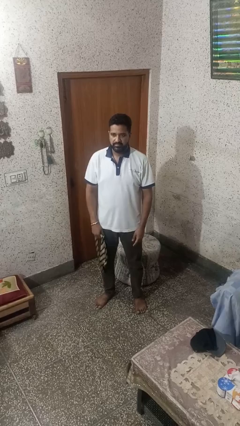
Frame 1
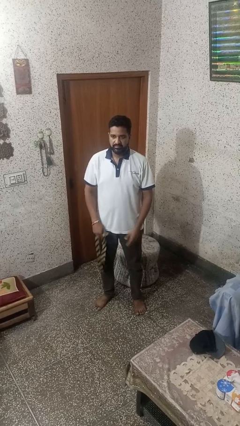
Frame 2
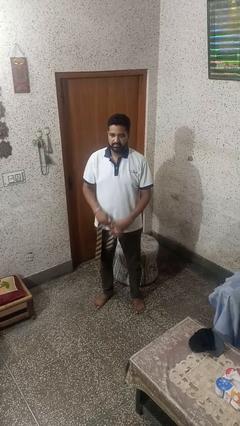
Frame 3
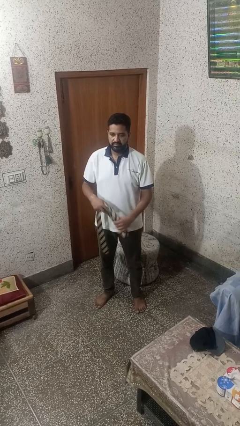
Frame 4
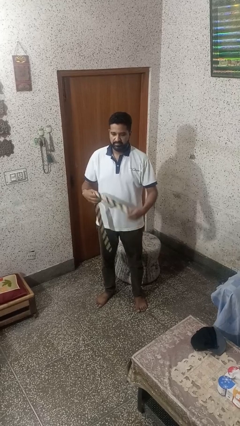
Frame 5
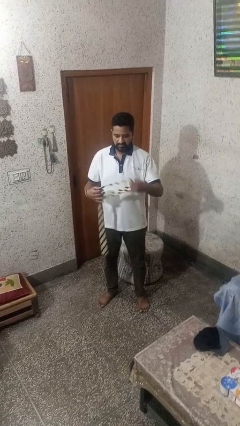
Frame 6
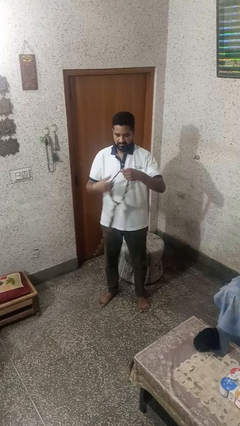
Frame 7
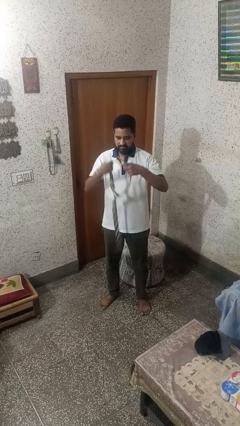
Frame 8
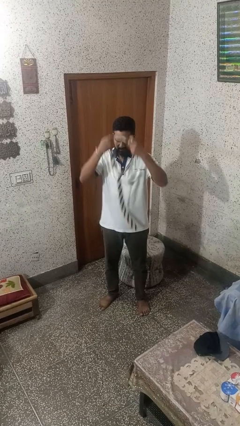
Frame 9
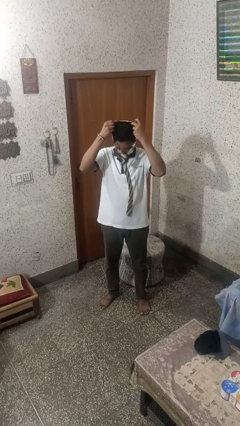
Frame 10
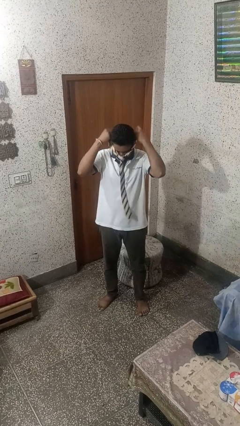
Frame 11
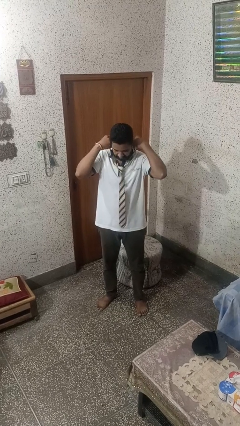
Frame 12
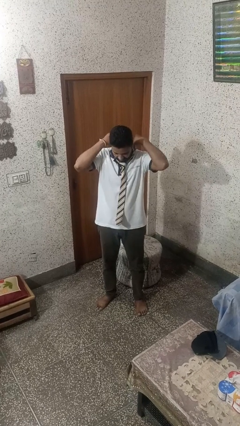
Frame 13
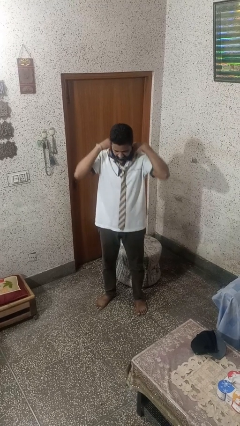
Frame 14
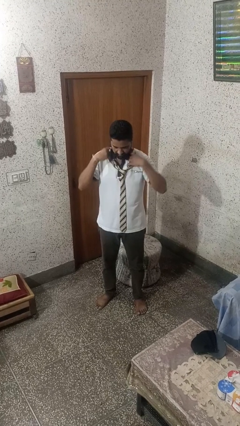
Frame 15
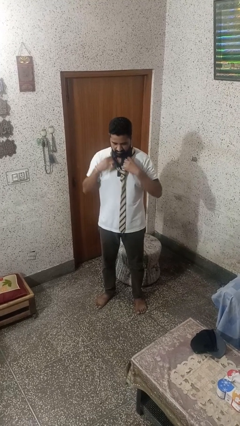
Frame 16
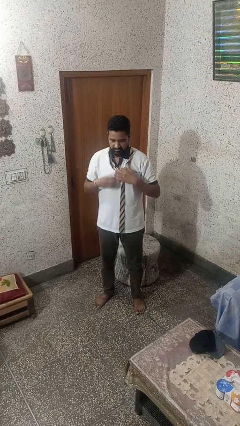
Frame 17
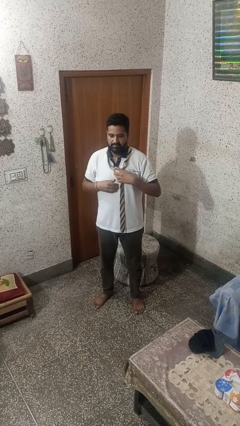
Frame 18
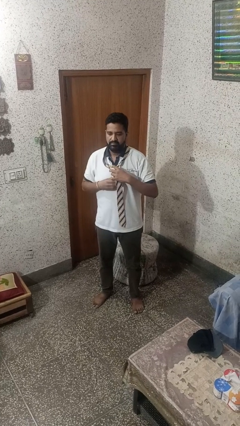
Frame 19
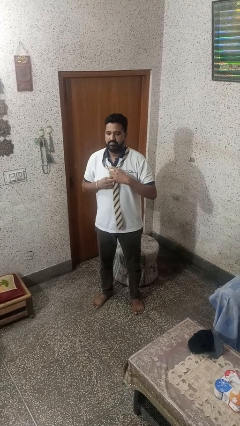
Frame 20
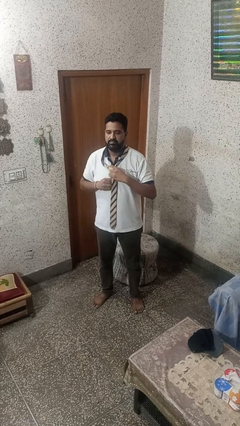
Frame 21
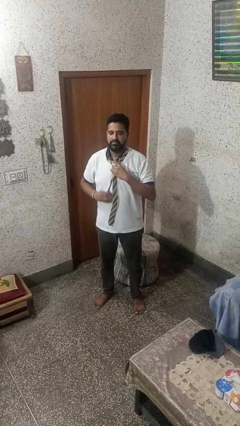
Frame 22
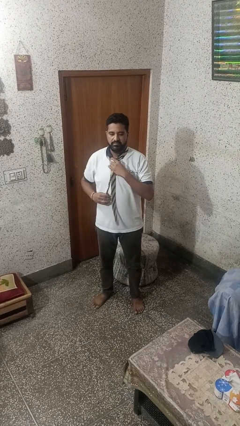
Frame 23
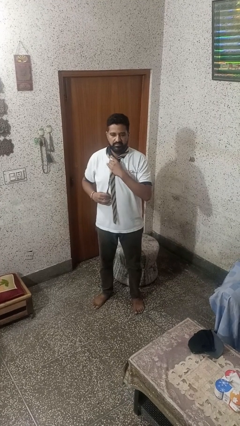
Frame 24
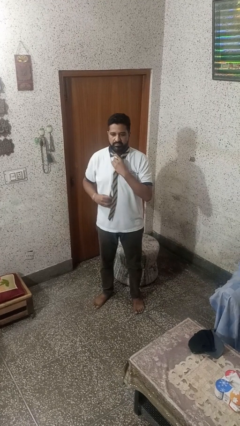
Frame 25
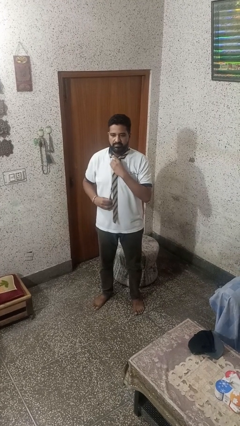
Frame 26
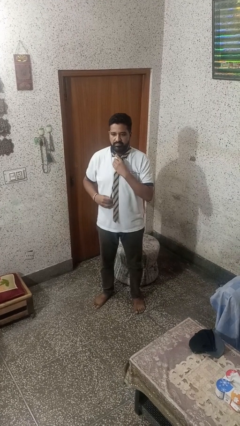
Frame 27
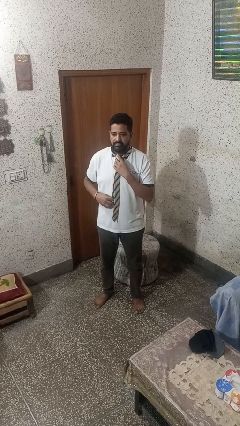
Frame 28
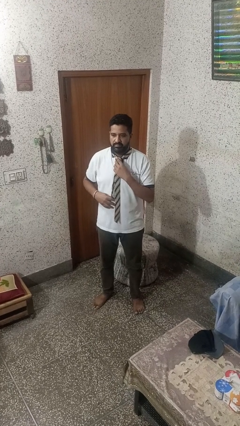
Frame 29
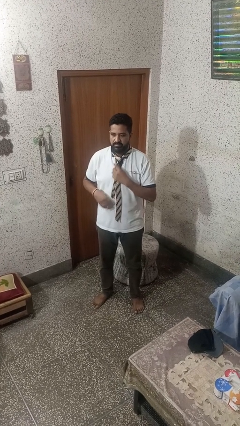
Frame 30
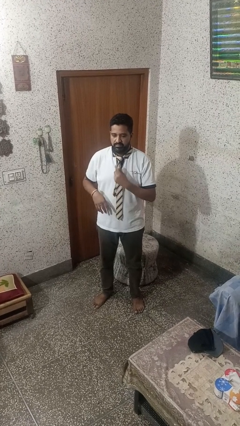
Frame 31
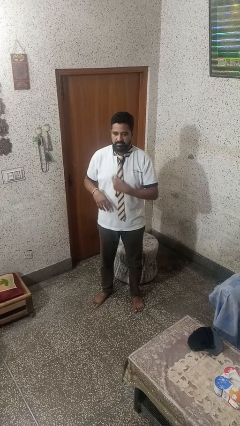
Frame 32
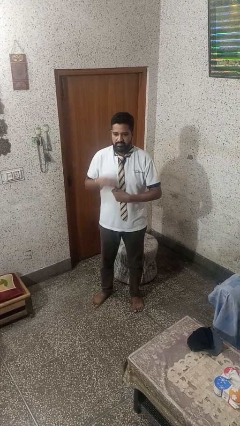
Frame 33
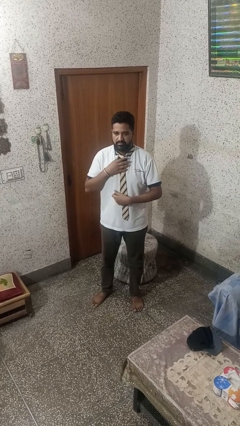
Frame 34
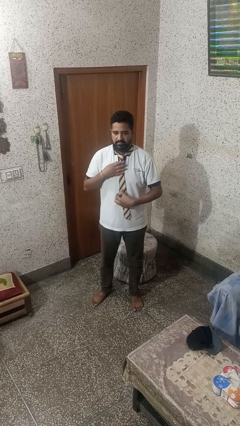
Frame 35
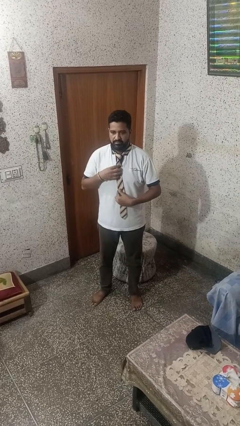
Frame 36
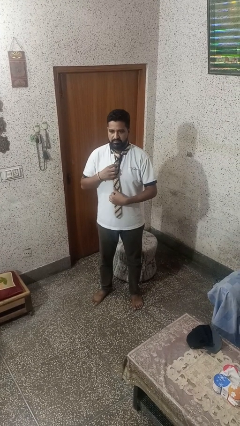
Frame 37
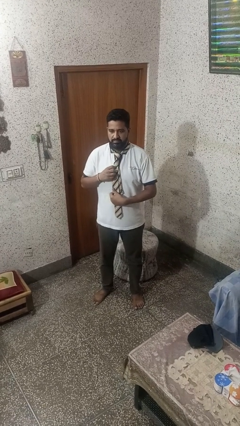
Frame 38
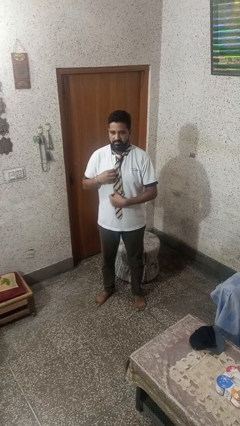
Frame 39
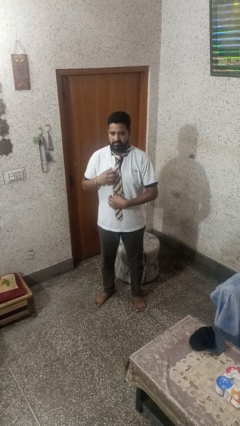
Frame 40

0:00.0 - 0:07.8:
person puts on necktie

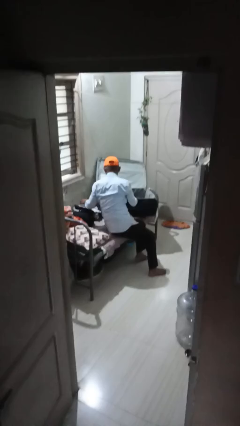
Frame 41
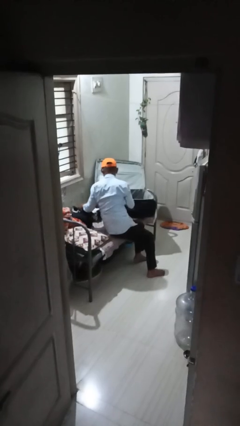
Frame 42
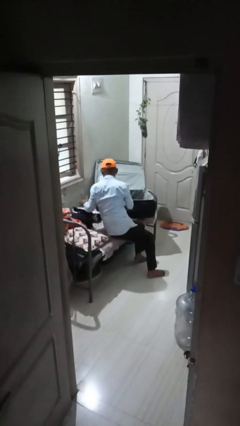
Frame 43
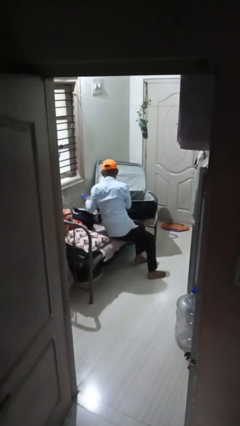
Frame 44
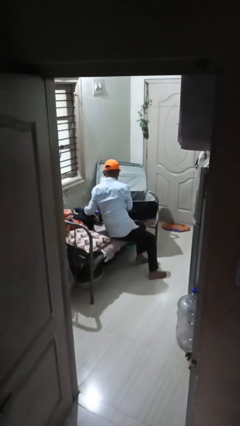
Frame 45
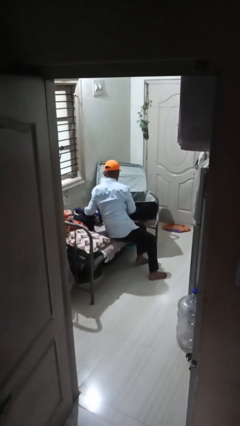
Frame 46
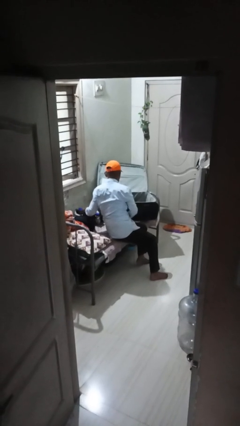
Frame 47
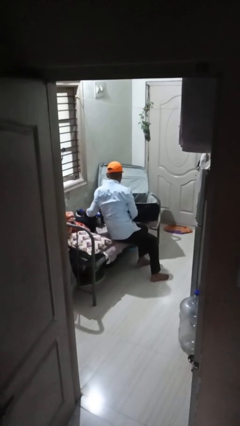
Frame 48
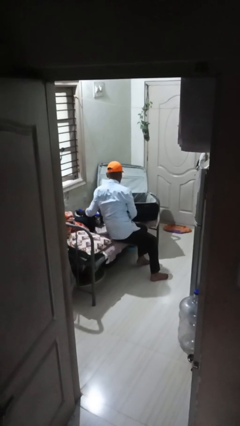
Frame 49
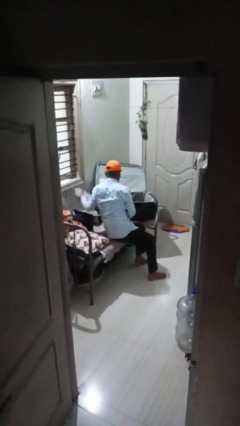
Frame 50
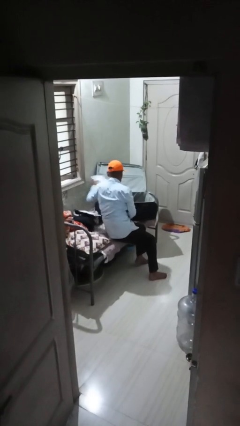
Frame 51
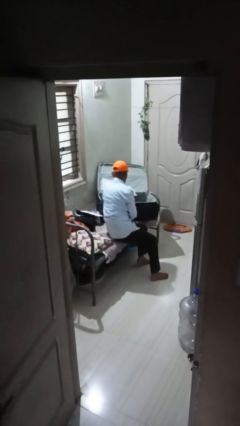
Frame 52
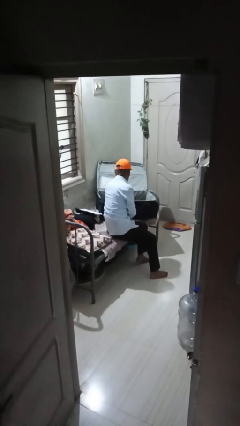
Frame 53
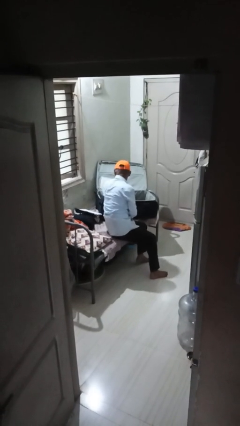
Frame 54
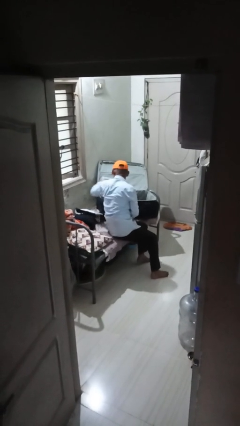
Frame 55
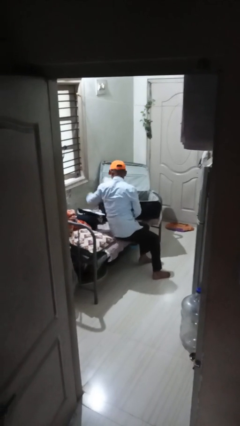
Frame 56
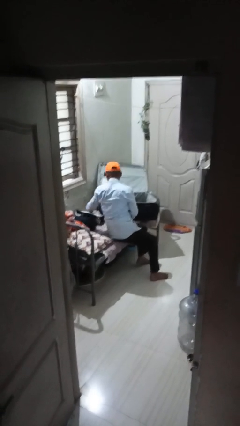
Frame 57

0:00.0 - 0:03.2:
person loads clothes into suitcase

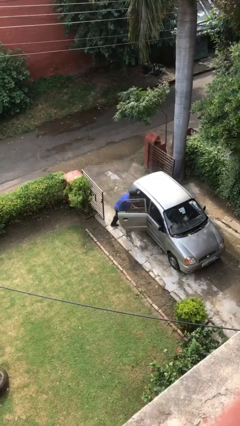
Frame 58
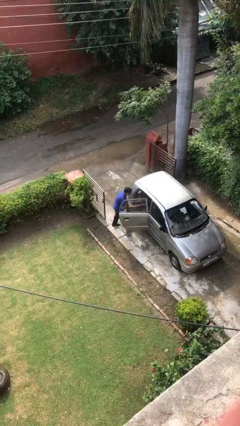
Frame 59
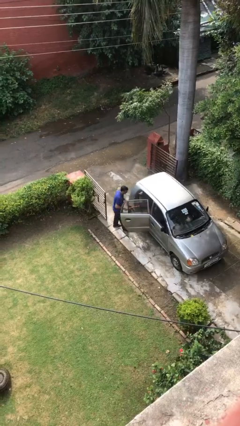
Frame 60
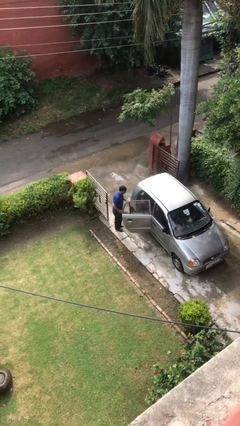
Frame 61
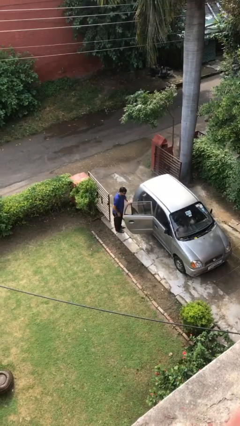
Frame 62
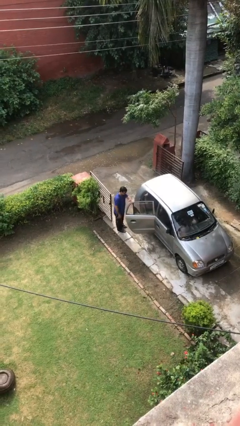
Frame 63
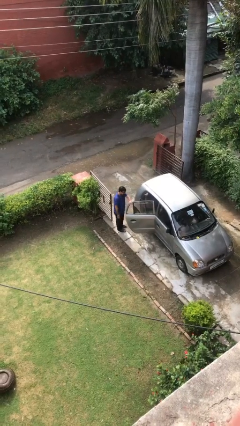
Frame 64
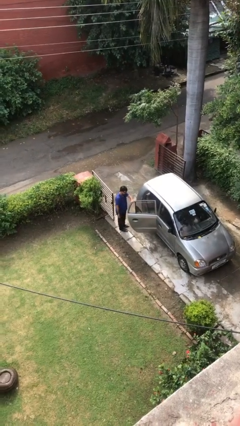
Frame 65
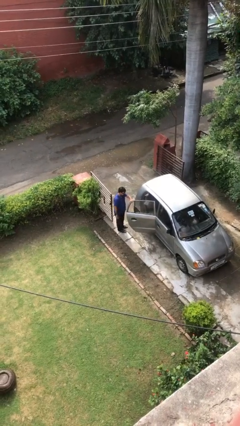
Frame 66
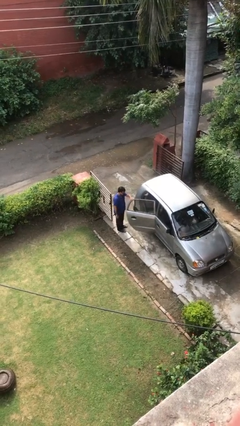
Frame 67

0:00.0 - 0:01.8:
person unloads car

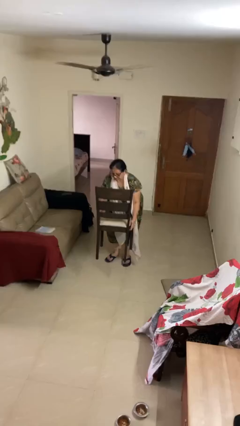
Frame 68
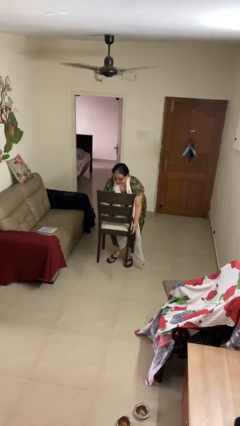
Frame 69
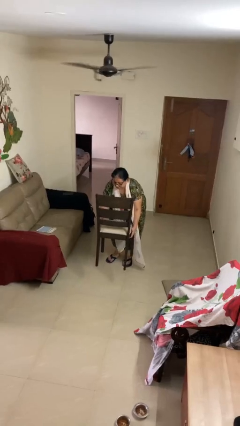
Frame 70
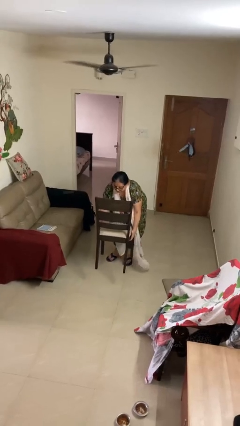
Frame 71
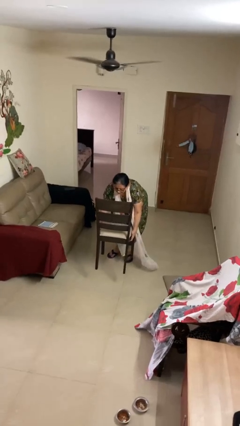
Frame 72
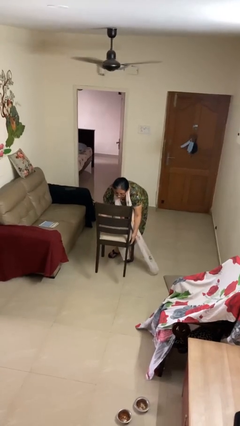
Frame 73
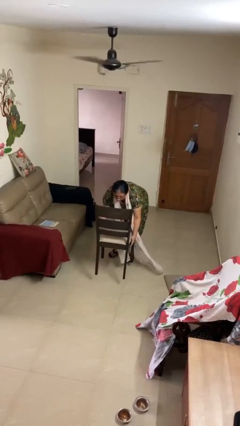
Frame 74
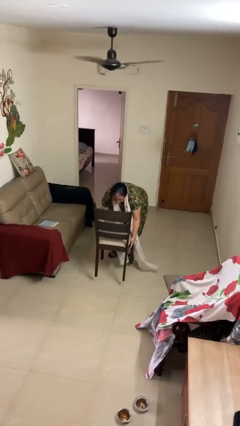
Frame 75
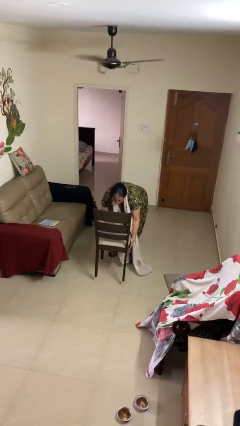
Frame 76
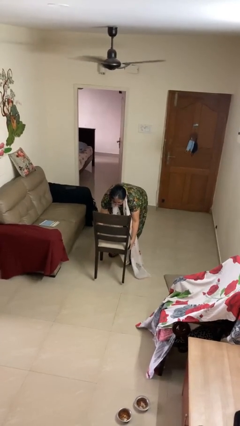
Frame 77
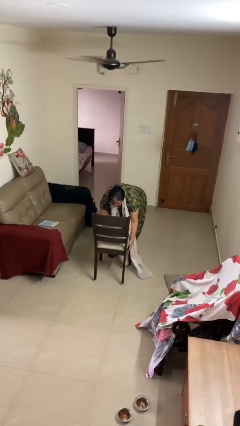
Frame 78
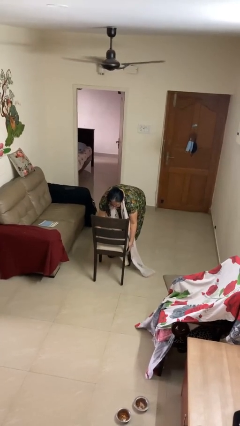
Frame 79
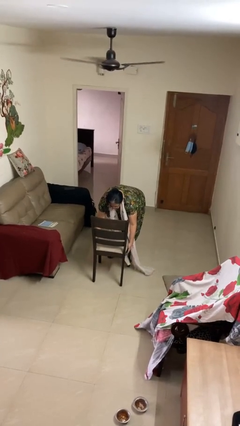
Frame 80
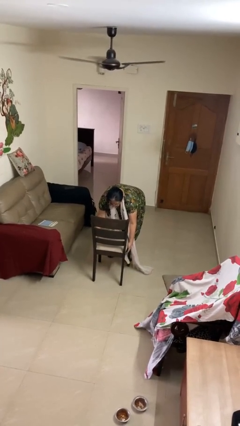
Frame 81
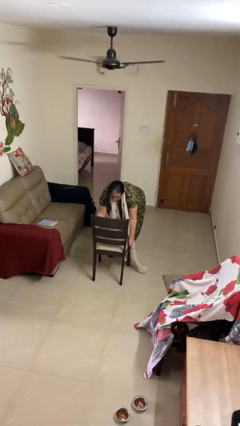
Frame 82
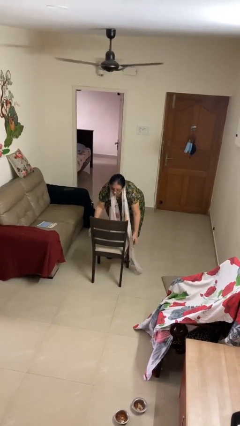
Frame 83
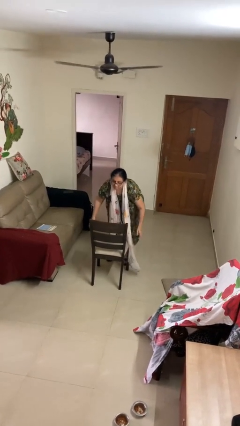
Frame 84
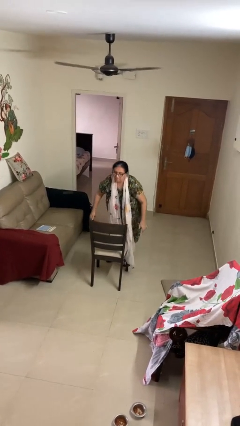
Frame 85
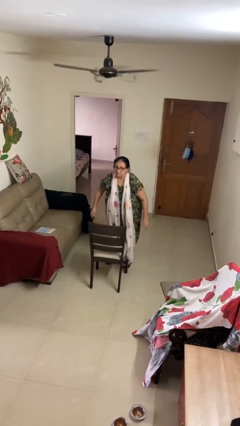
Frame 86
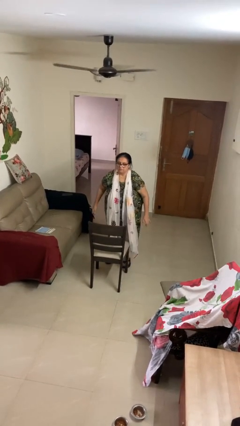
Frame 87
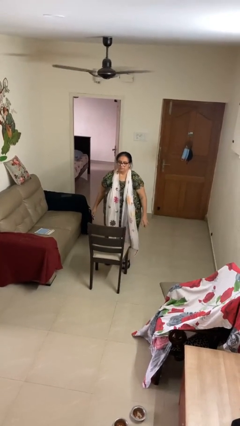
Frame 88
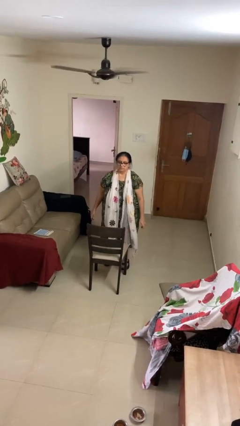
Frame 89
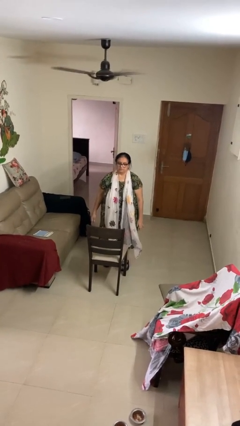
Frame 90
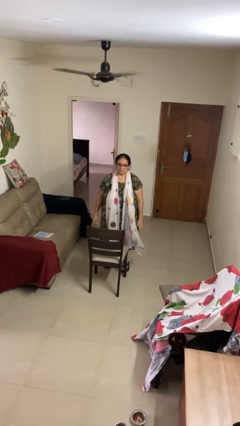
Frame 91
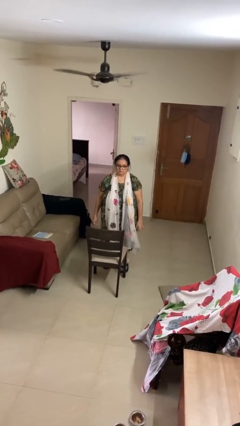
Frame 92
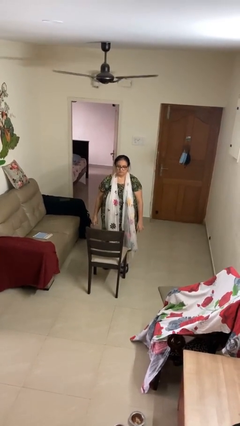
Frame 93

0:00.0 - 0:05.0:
person puts down object on floor
